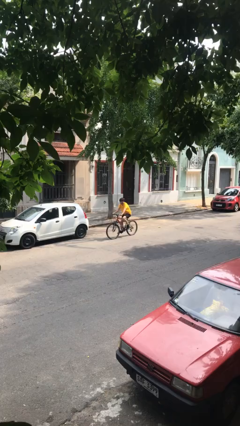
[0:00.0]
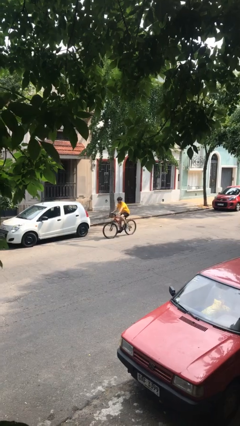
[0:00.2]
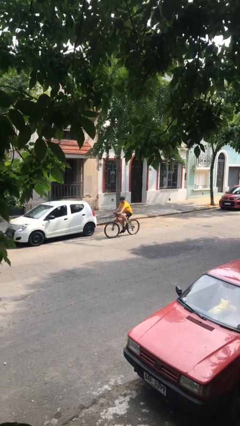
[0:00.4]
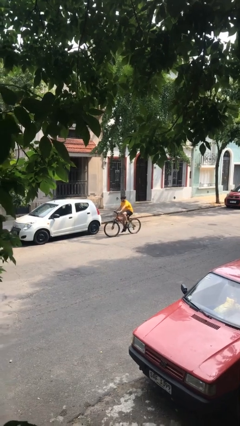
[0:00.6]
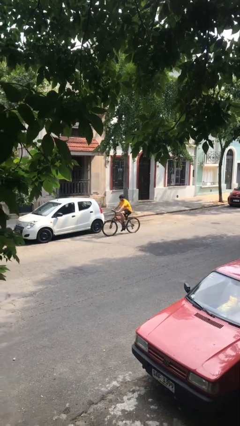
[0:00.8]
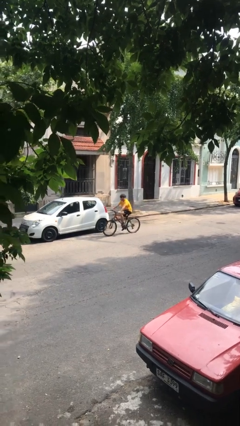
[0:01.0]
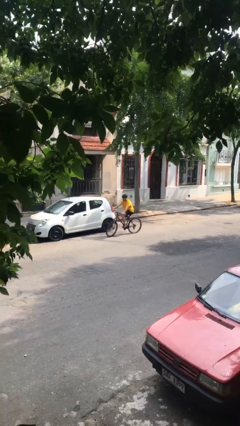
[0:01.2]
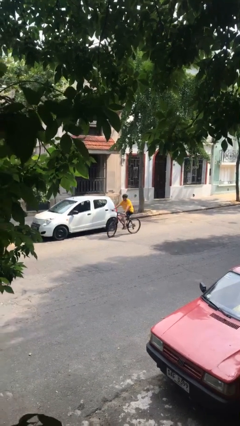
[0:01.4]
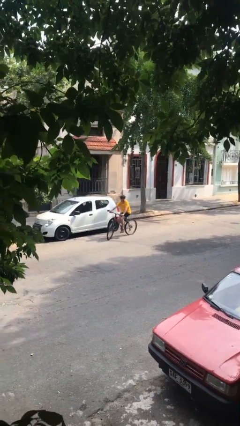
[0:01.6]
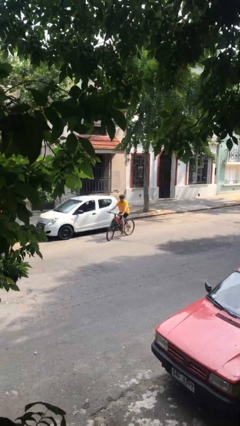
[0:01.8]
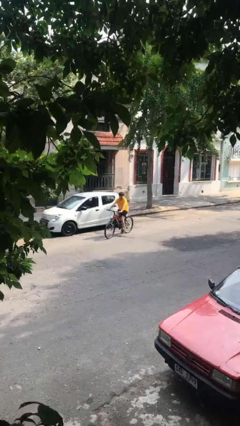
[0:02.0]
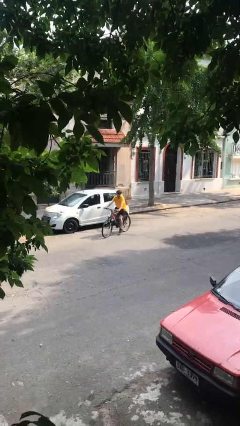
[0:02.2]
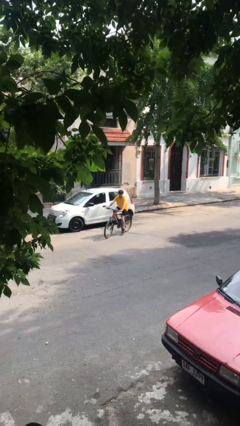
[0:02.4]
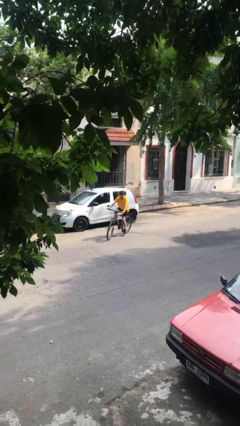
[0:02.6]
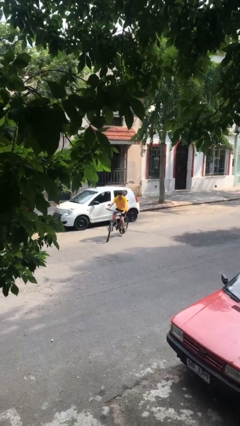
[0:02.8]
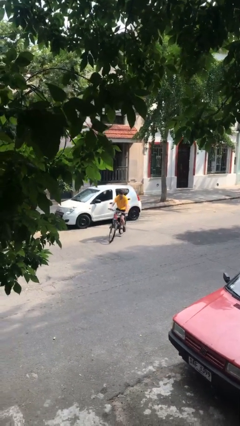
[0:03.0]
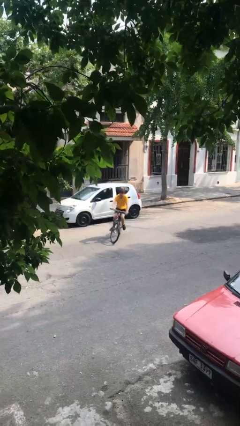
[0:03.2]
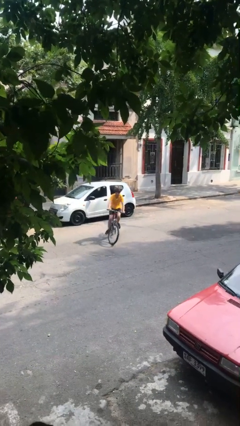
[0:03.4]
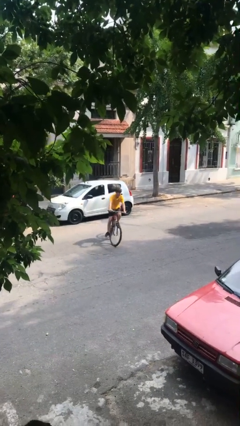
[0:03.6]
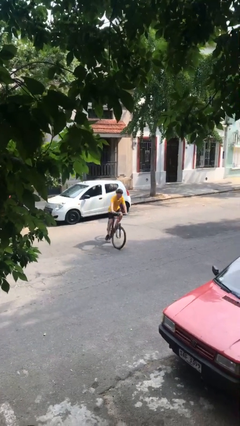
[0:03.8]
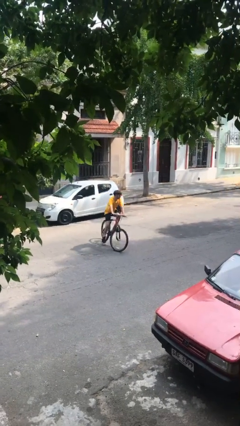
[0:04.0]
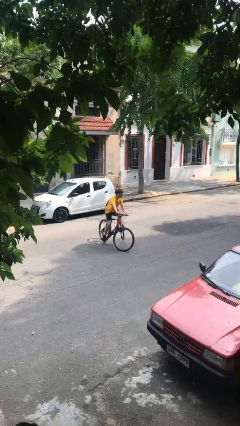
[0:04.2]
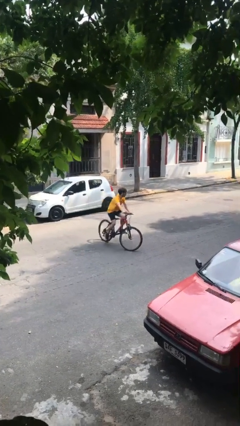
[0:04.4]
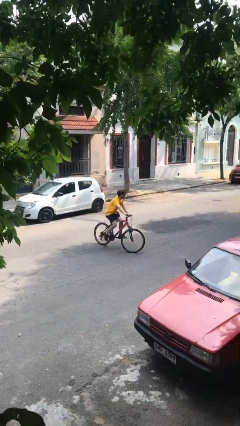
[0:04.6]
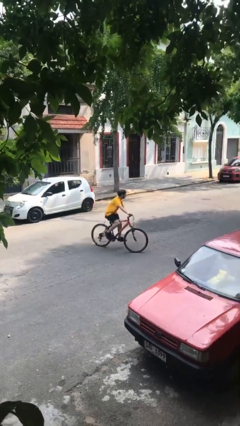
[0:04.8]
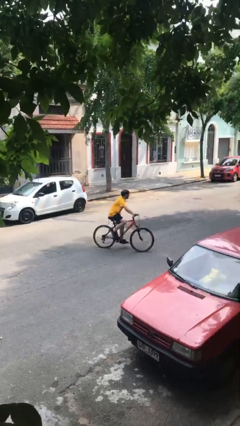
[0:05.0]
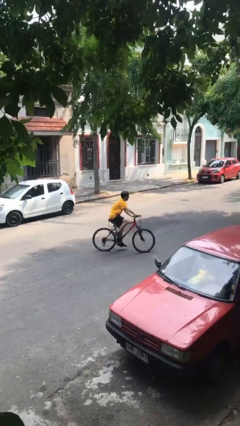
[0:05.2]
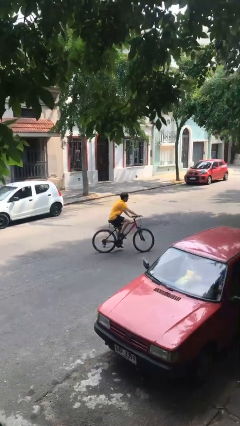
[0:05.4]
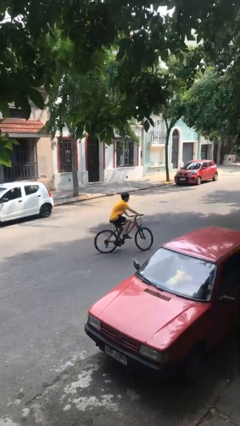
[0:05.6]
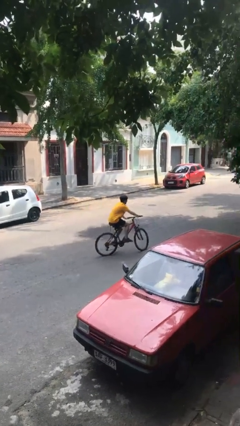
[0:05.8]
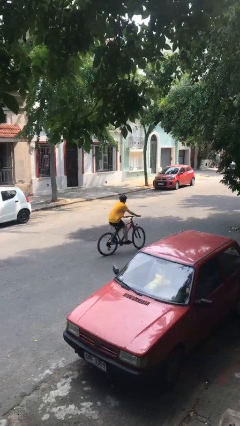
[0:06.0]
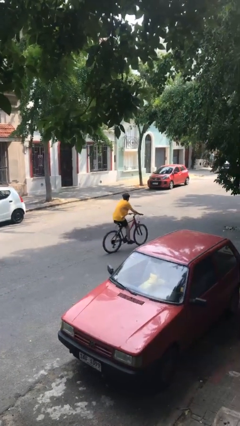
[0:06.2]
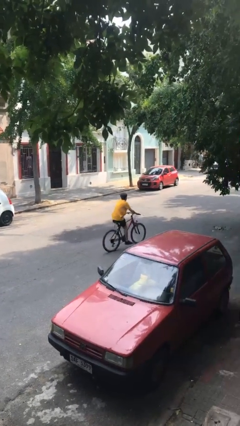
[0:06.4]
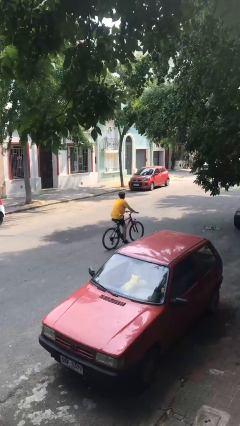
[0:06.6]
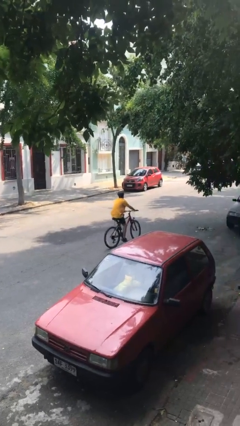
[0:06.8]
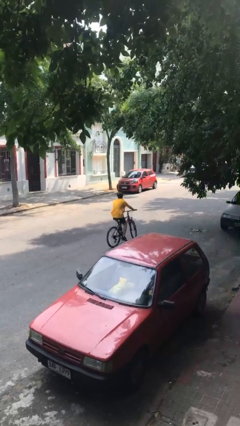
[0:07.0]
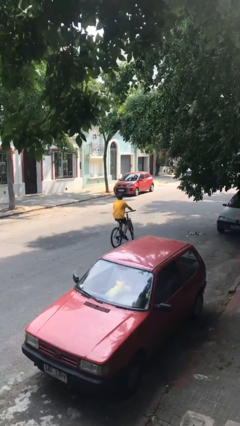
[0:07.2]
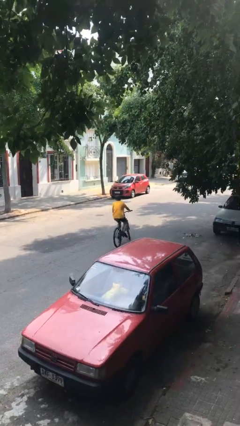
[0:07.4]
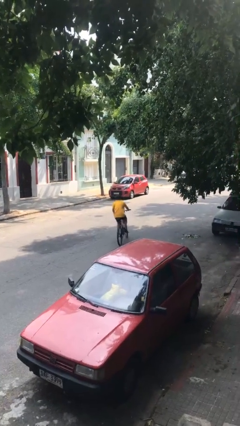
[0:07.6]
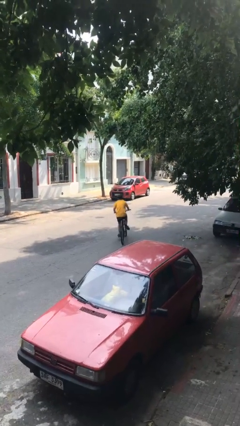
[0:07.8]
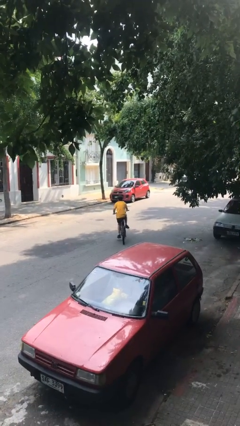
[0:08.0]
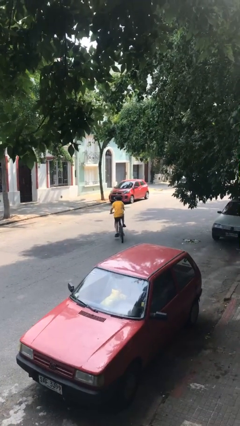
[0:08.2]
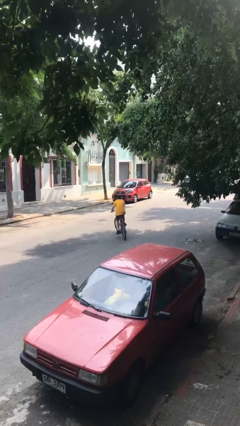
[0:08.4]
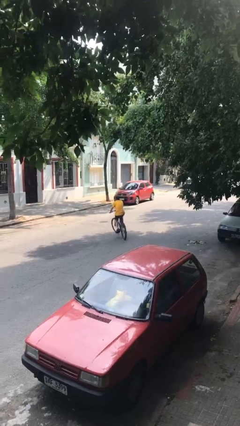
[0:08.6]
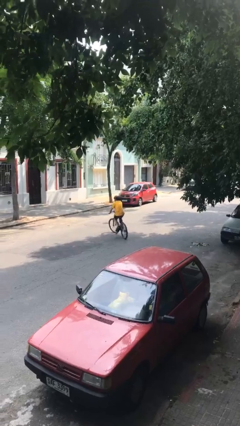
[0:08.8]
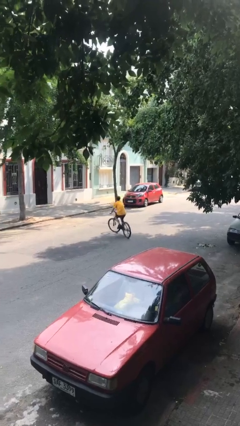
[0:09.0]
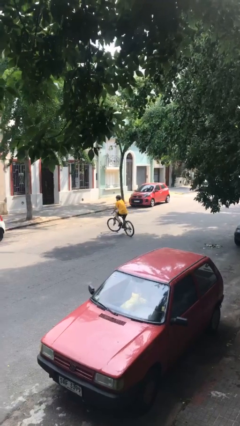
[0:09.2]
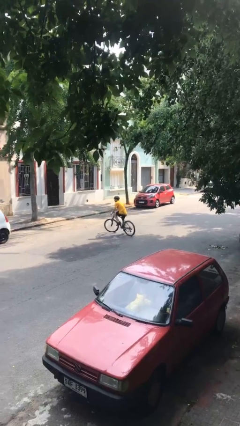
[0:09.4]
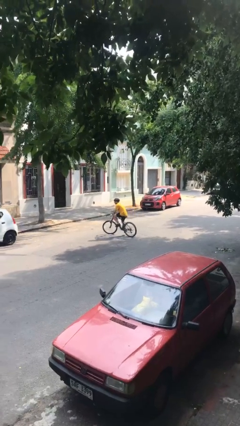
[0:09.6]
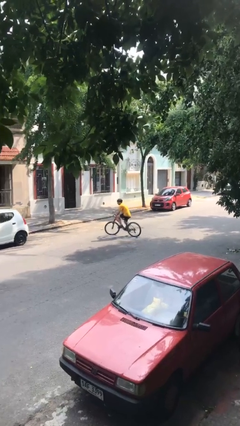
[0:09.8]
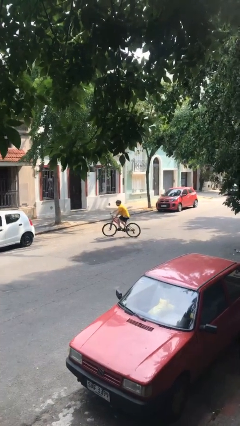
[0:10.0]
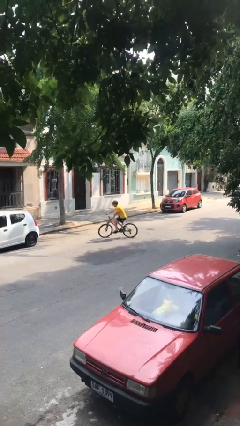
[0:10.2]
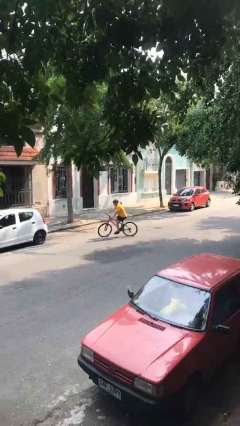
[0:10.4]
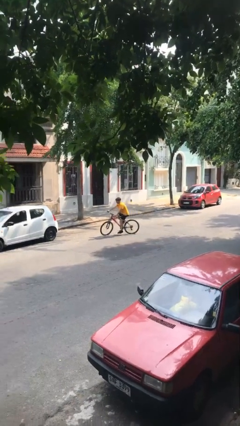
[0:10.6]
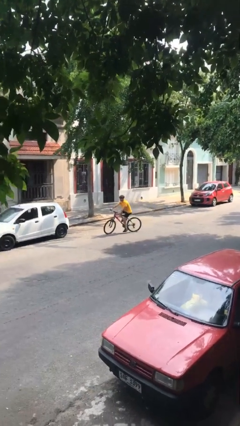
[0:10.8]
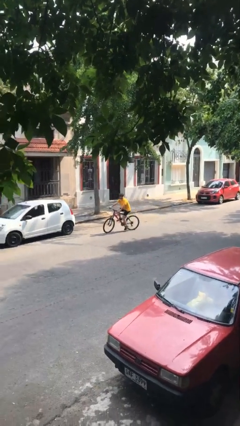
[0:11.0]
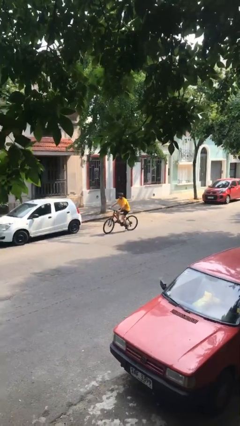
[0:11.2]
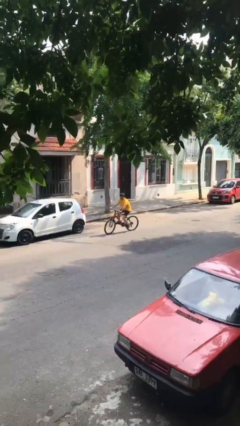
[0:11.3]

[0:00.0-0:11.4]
person rides bicycle

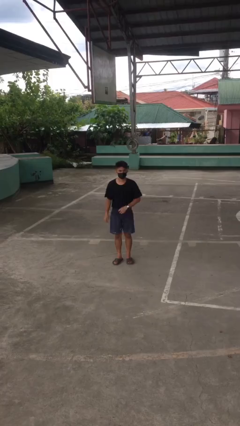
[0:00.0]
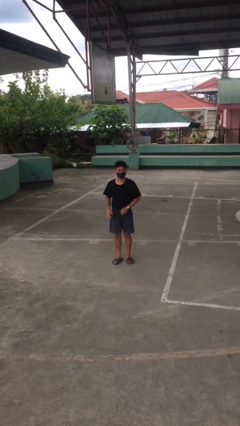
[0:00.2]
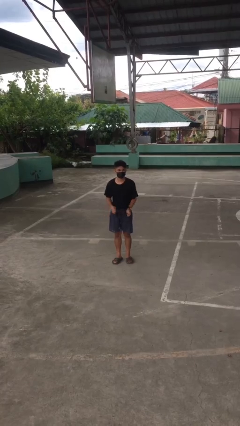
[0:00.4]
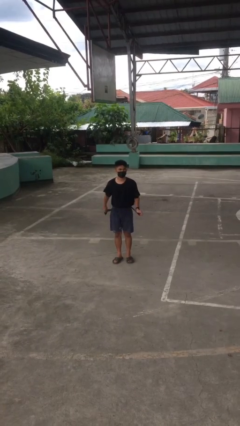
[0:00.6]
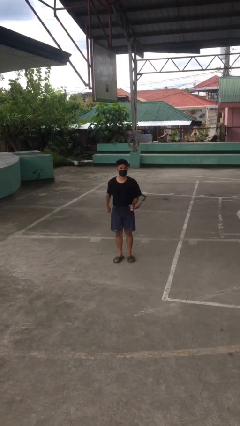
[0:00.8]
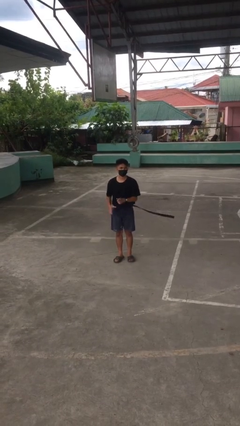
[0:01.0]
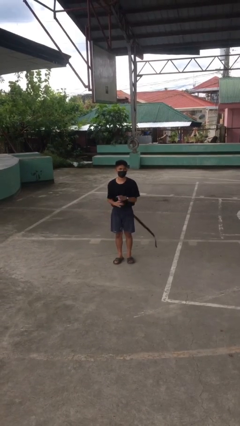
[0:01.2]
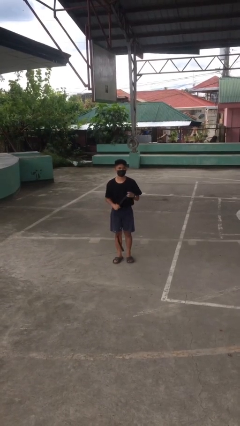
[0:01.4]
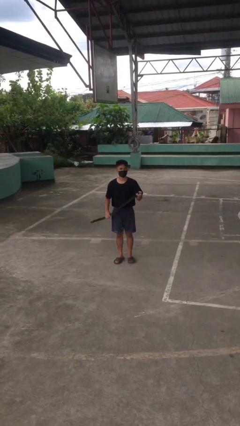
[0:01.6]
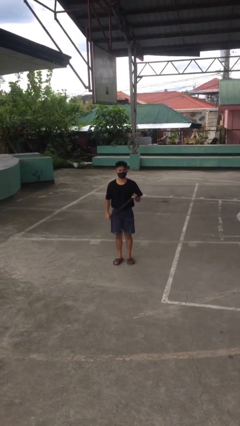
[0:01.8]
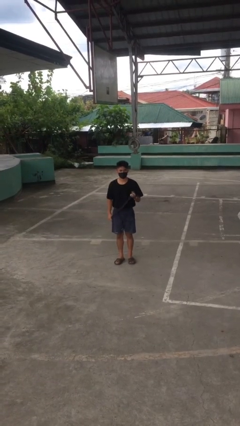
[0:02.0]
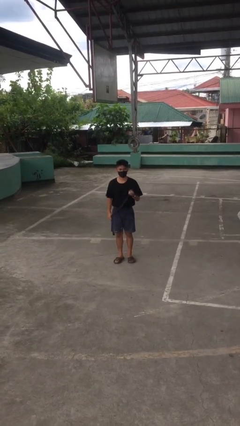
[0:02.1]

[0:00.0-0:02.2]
person takes off belt

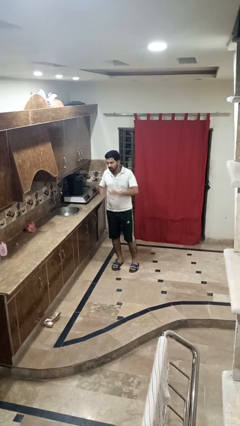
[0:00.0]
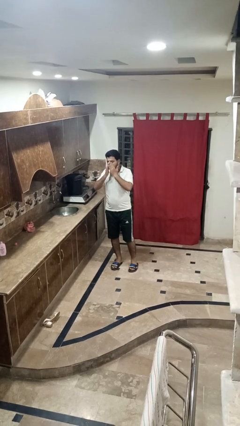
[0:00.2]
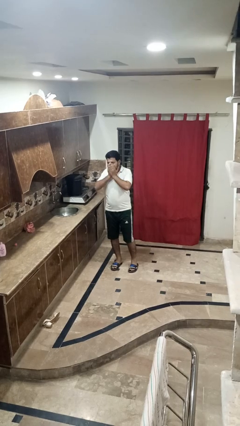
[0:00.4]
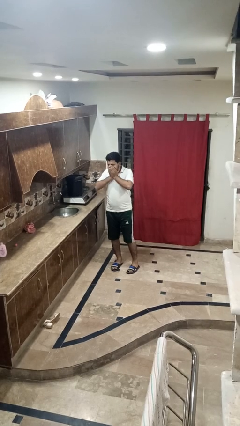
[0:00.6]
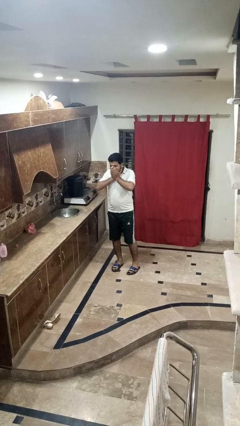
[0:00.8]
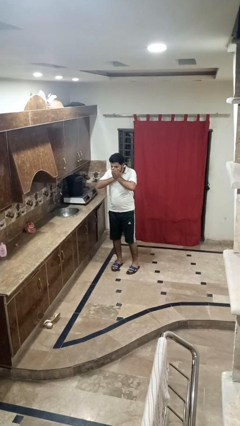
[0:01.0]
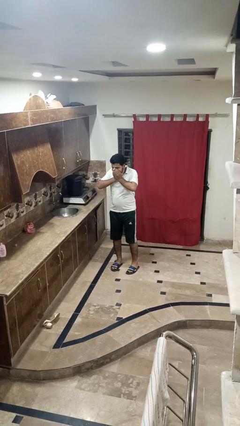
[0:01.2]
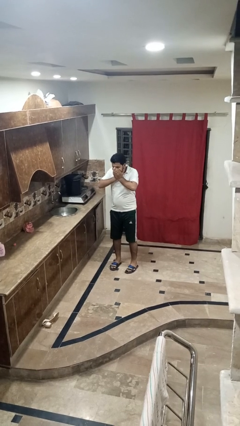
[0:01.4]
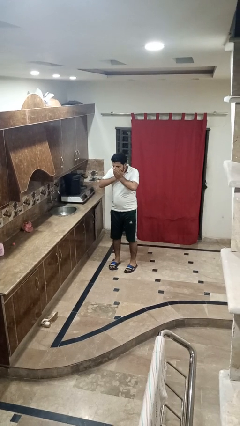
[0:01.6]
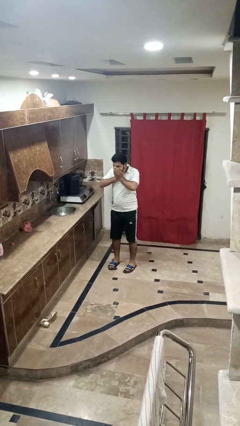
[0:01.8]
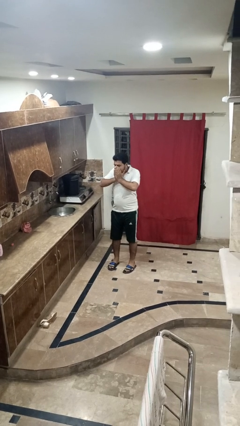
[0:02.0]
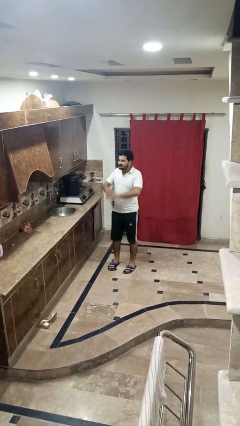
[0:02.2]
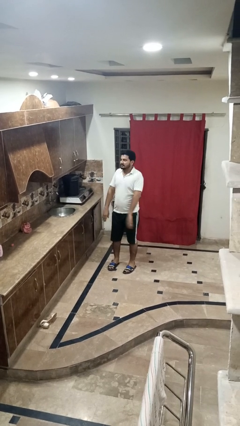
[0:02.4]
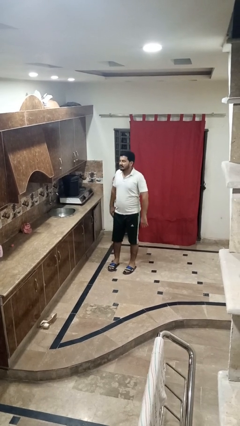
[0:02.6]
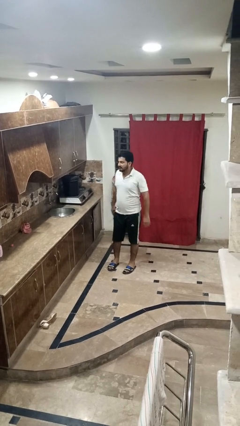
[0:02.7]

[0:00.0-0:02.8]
person sneezes into hand

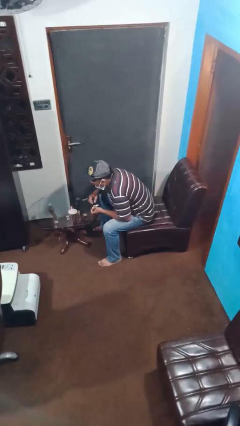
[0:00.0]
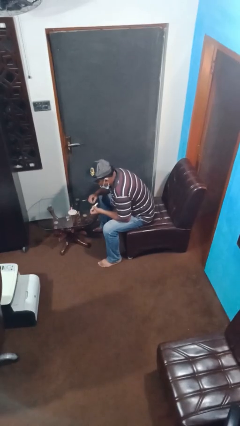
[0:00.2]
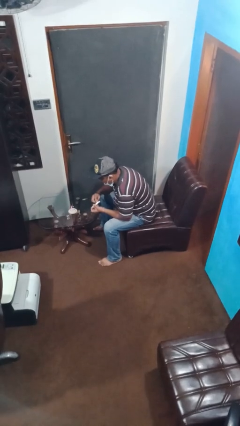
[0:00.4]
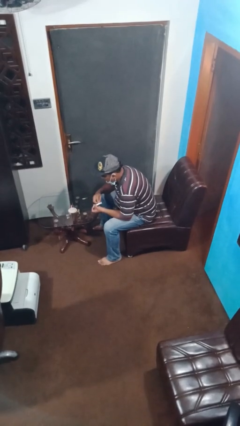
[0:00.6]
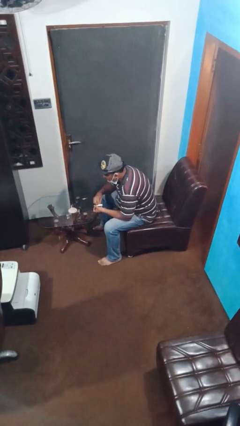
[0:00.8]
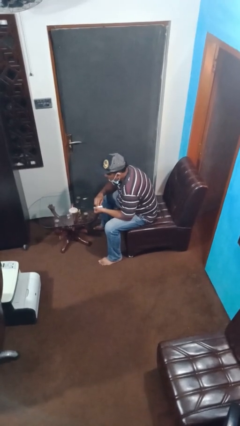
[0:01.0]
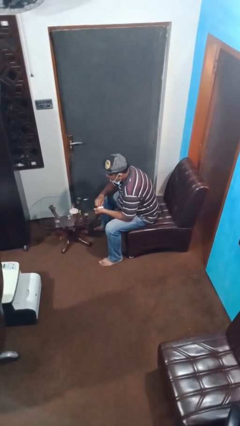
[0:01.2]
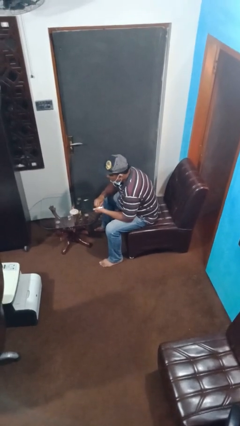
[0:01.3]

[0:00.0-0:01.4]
person extinguishes candle

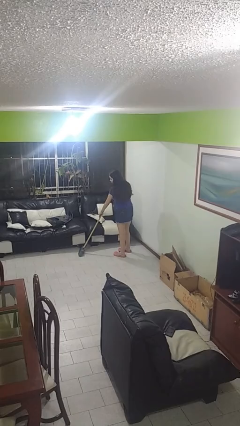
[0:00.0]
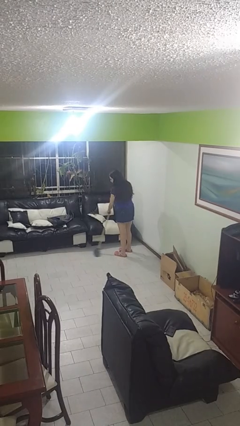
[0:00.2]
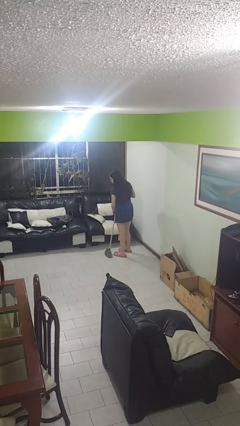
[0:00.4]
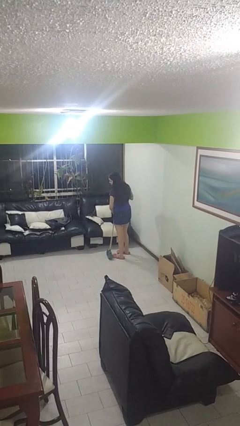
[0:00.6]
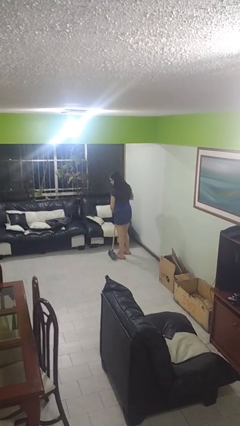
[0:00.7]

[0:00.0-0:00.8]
person sweeps floor
